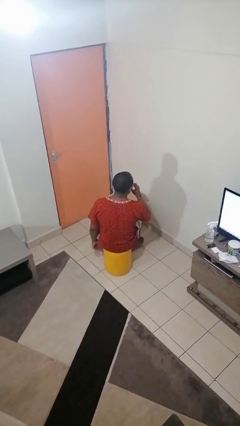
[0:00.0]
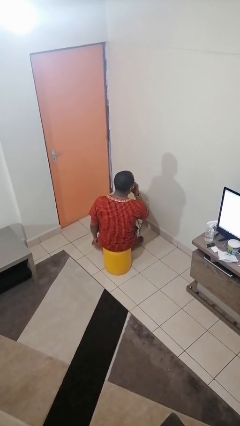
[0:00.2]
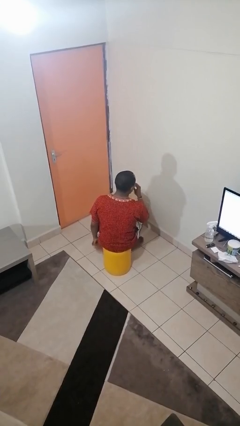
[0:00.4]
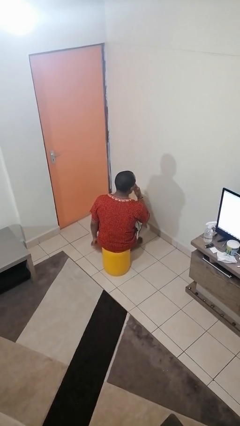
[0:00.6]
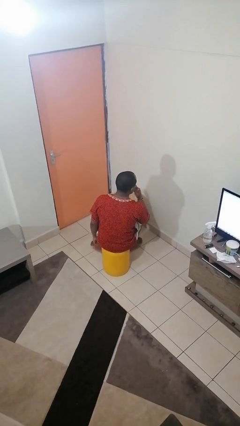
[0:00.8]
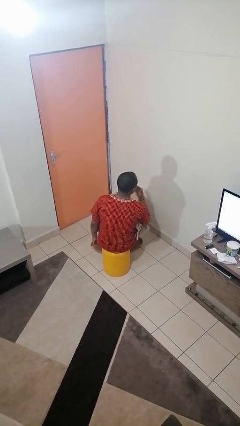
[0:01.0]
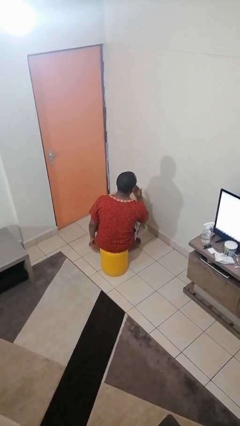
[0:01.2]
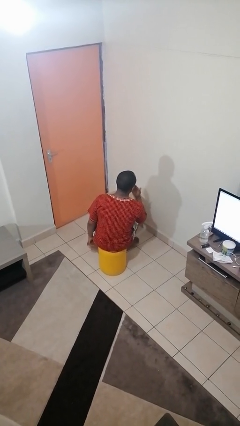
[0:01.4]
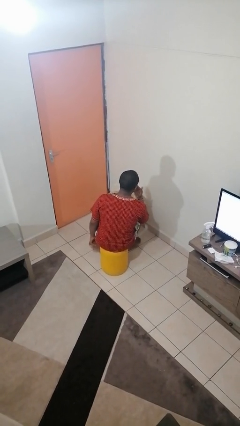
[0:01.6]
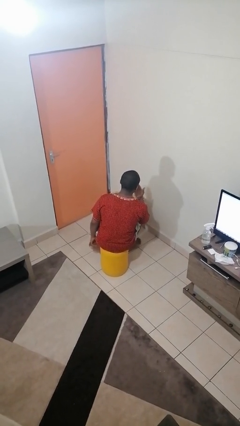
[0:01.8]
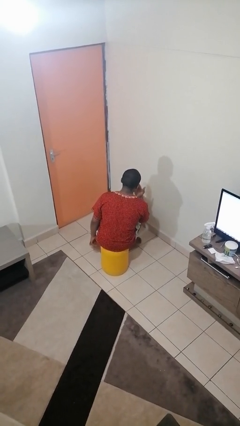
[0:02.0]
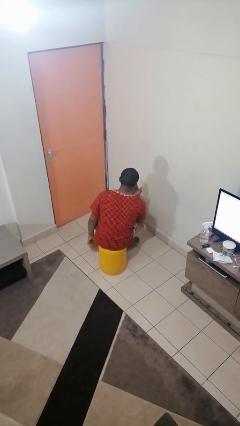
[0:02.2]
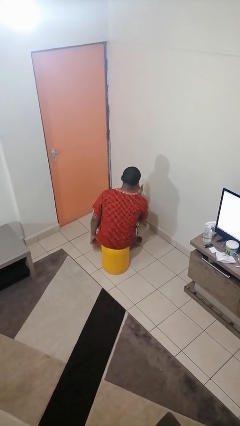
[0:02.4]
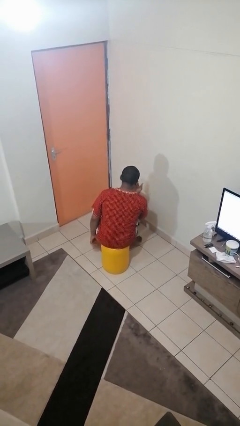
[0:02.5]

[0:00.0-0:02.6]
person licks fingers

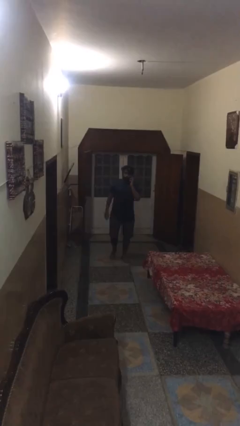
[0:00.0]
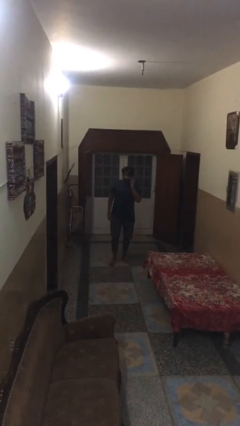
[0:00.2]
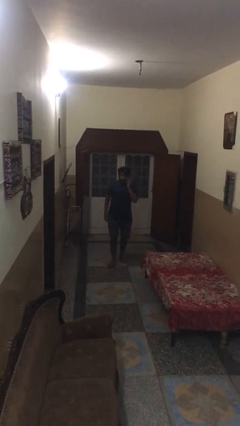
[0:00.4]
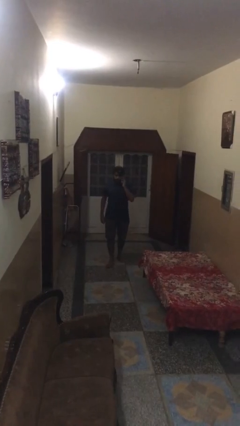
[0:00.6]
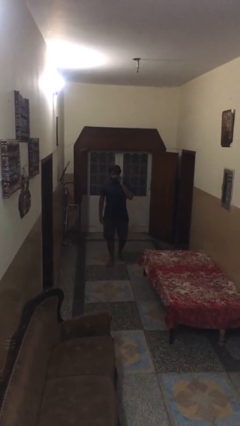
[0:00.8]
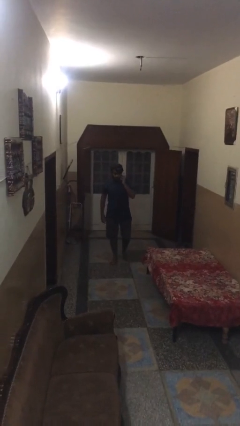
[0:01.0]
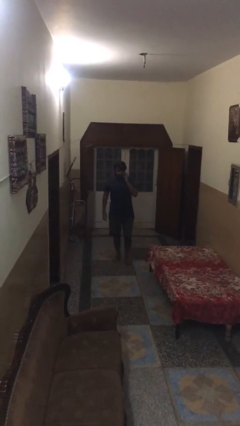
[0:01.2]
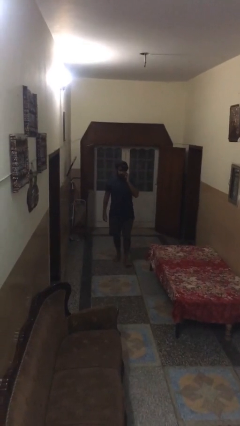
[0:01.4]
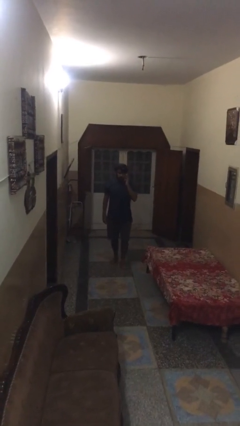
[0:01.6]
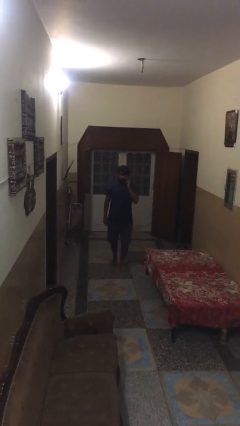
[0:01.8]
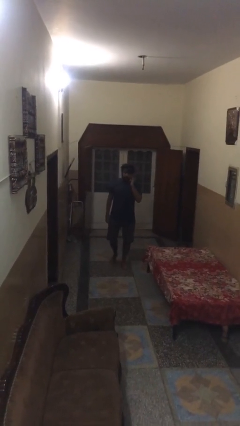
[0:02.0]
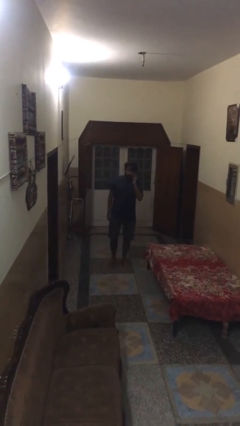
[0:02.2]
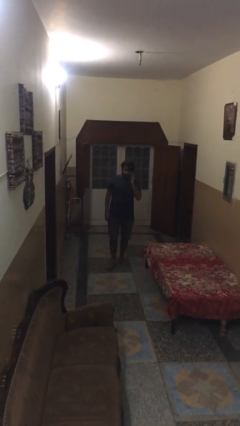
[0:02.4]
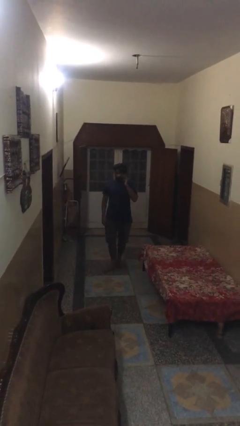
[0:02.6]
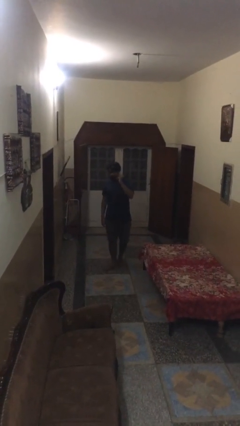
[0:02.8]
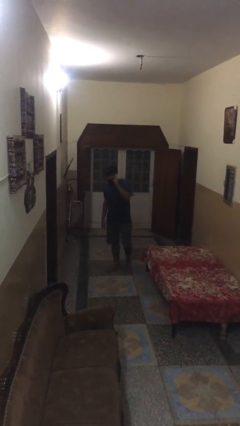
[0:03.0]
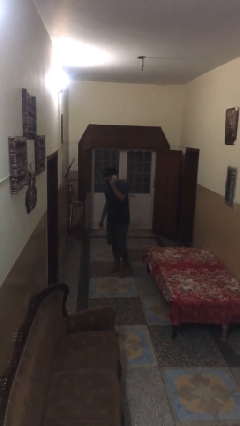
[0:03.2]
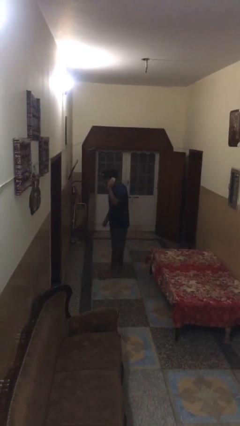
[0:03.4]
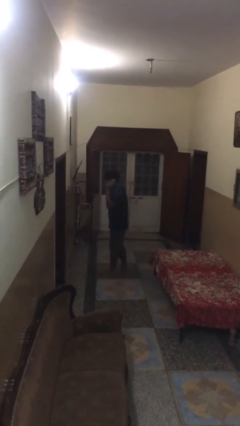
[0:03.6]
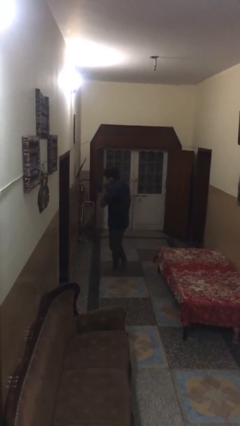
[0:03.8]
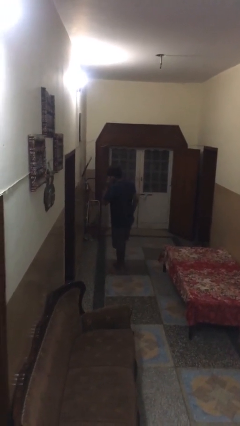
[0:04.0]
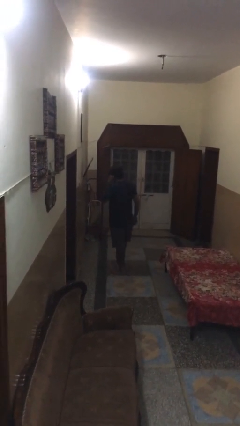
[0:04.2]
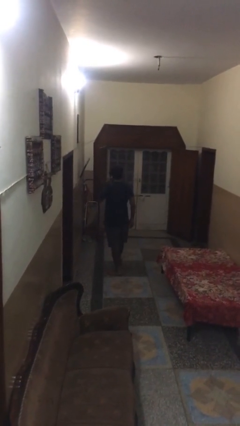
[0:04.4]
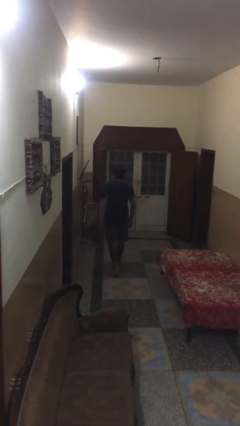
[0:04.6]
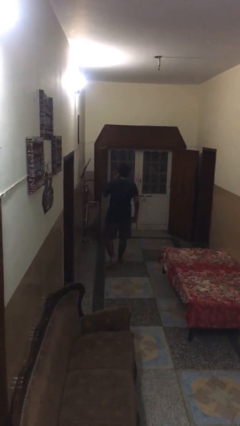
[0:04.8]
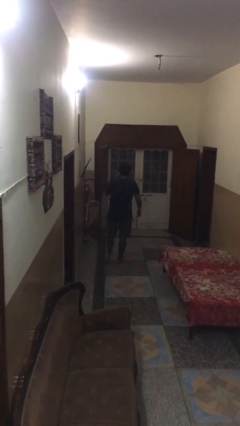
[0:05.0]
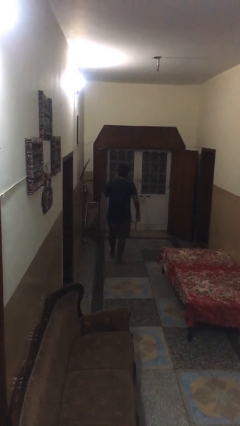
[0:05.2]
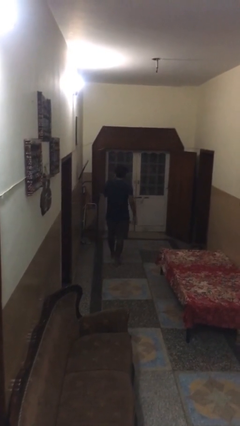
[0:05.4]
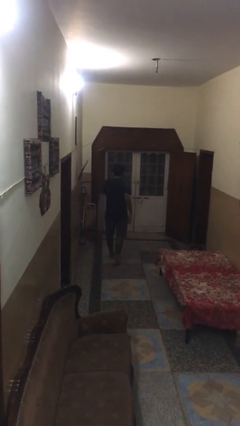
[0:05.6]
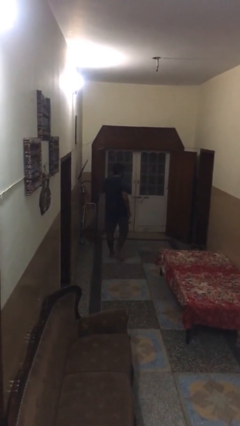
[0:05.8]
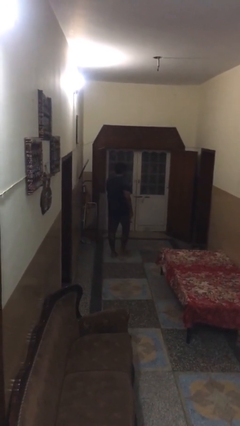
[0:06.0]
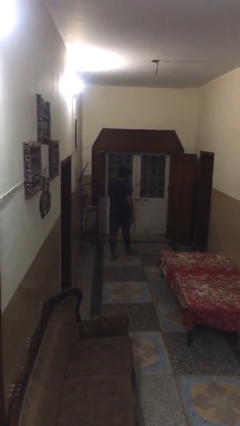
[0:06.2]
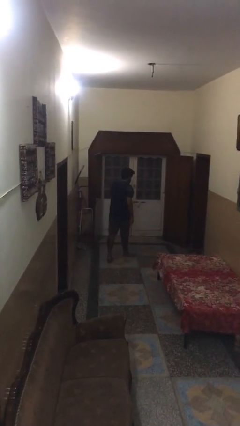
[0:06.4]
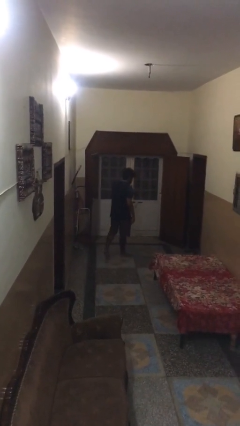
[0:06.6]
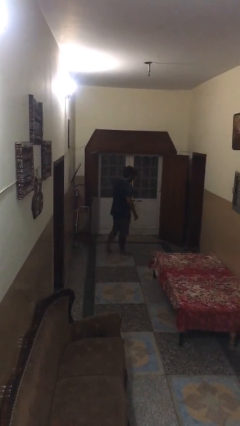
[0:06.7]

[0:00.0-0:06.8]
person talks on phone

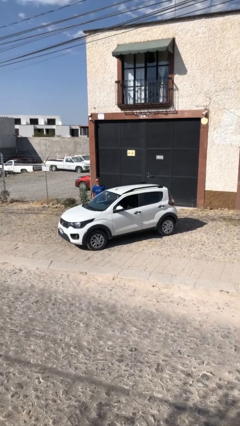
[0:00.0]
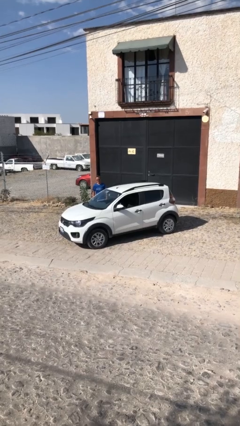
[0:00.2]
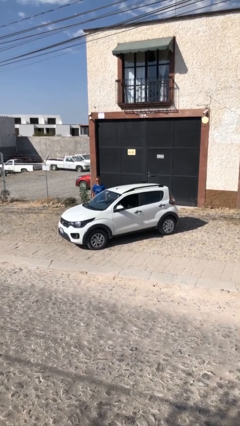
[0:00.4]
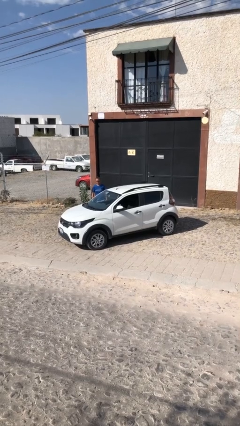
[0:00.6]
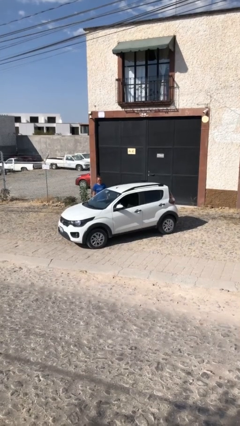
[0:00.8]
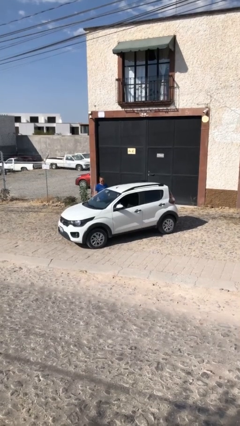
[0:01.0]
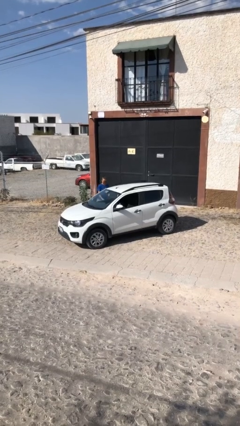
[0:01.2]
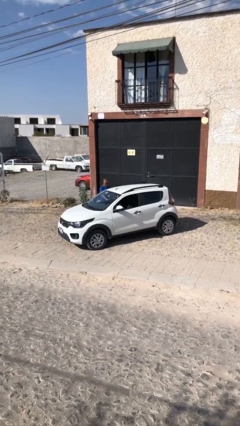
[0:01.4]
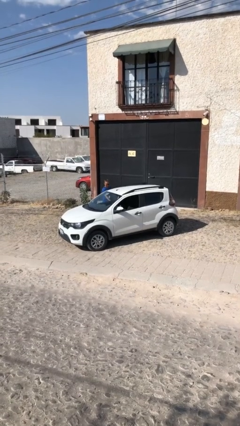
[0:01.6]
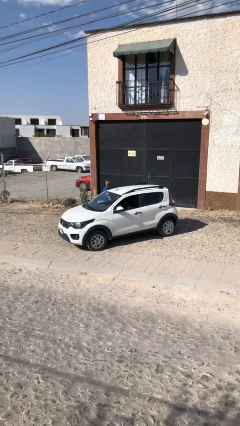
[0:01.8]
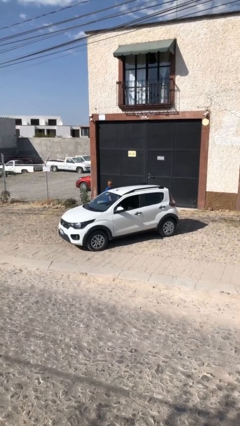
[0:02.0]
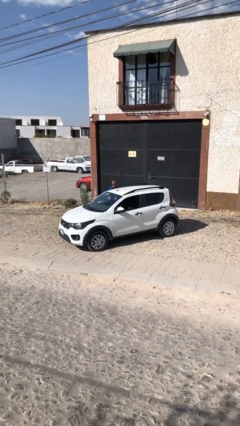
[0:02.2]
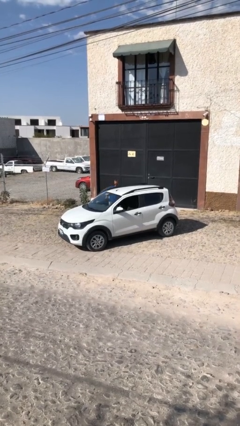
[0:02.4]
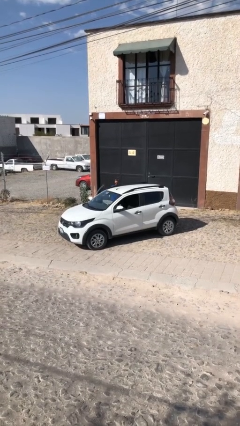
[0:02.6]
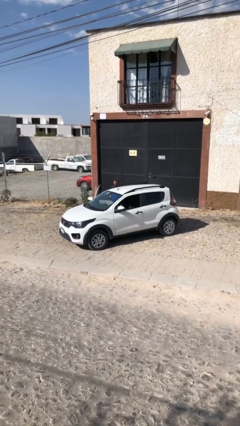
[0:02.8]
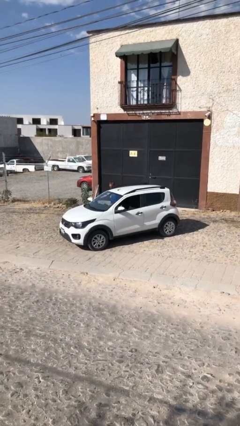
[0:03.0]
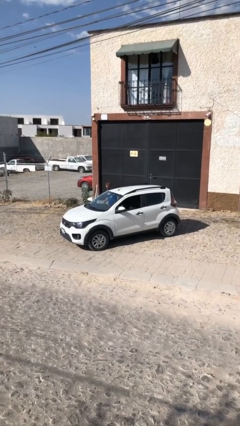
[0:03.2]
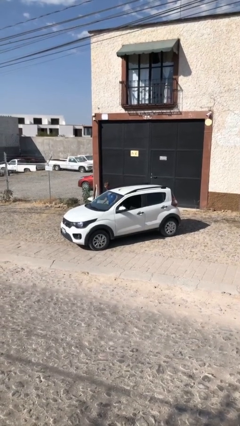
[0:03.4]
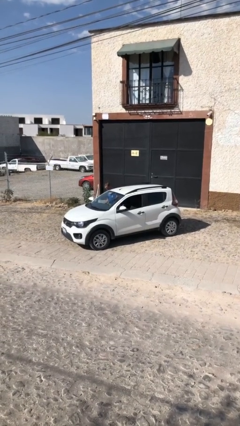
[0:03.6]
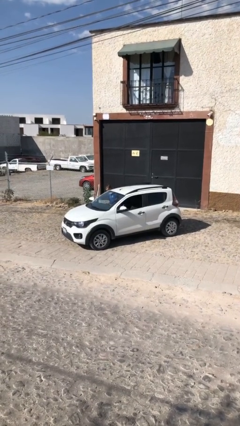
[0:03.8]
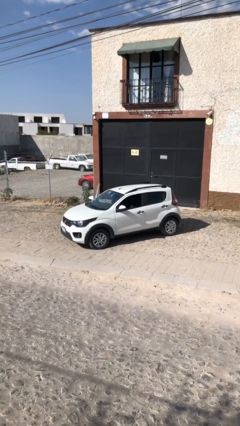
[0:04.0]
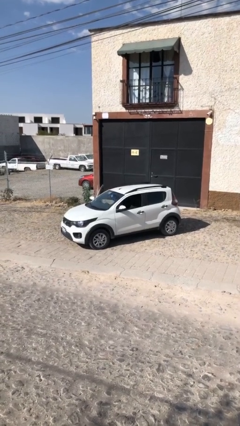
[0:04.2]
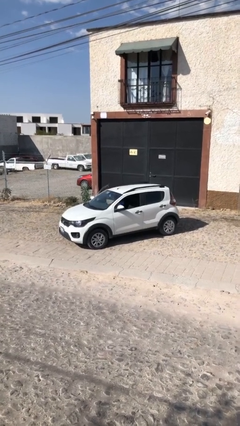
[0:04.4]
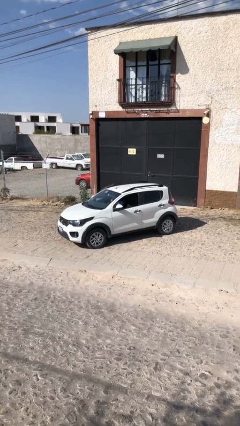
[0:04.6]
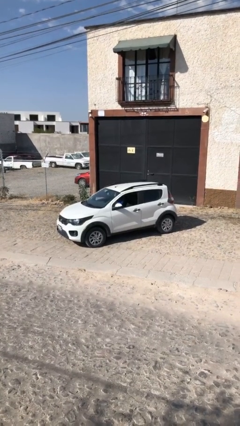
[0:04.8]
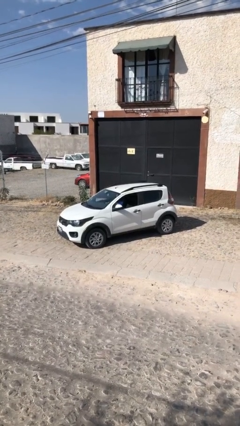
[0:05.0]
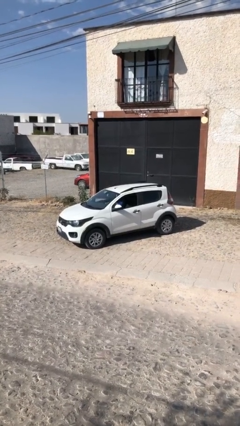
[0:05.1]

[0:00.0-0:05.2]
car picks up person

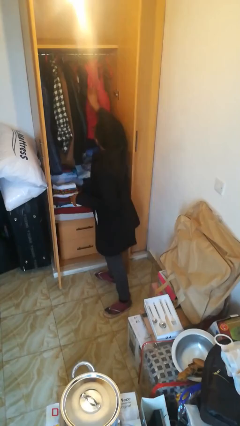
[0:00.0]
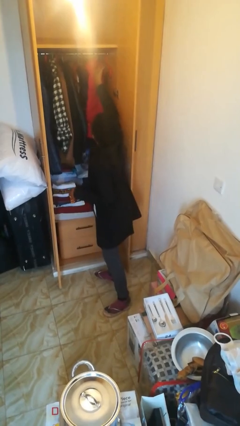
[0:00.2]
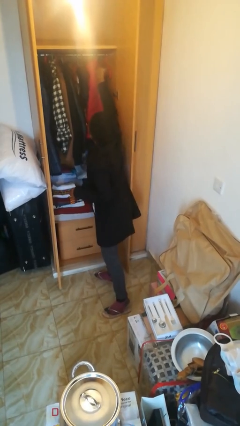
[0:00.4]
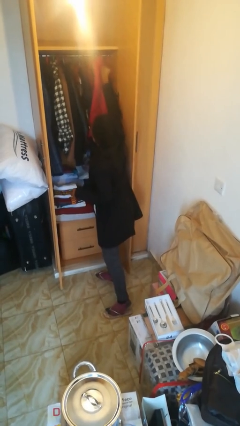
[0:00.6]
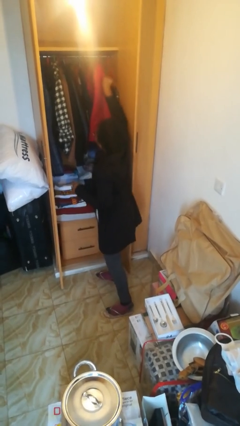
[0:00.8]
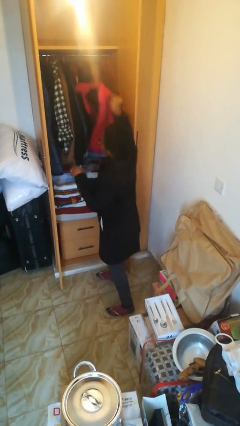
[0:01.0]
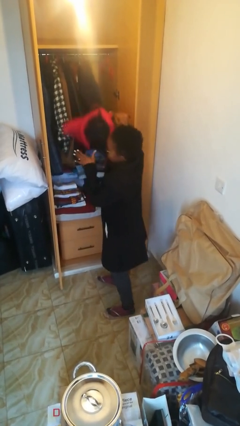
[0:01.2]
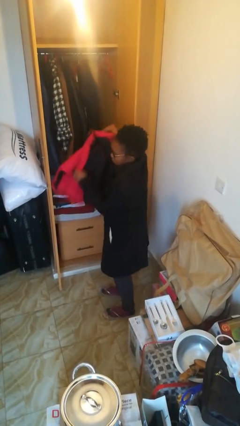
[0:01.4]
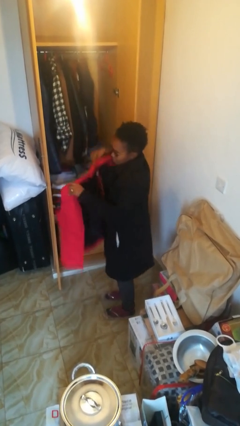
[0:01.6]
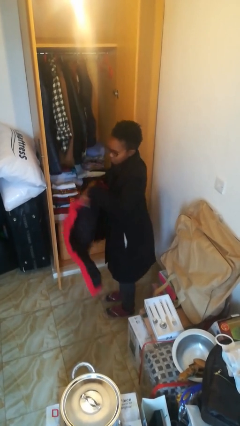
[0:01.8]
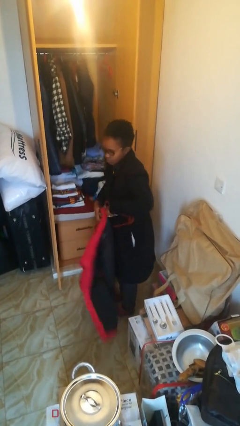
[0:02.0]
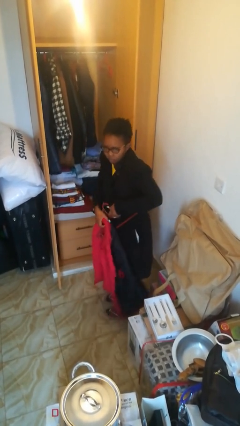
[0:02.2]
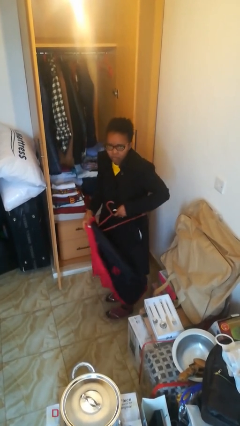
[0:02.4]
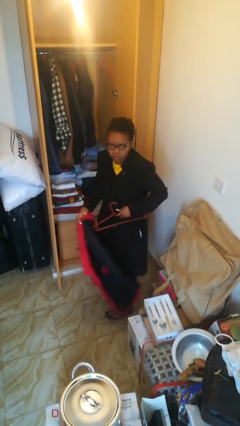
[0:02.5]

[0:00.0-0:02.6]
person takes clothes from closet

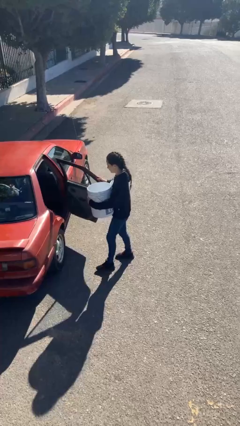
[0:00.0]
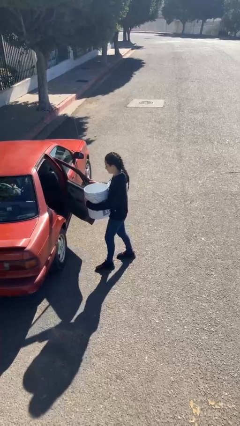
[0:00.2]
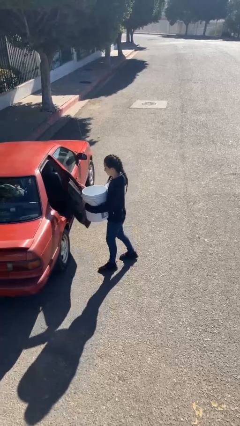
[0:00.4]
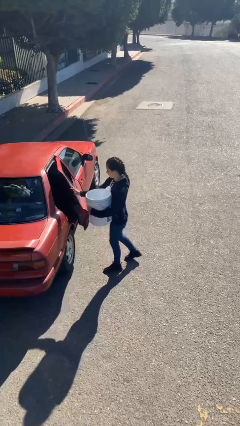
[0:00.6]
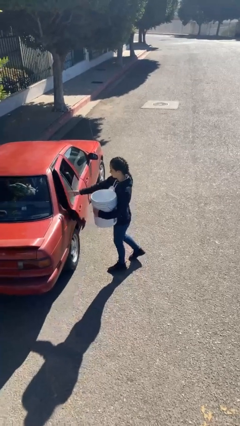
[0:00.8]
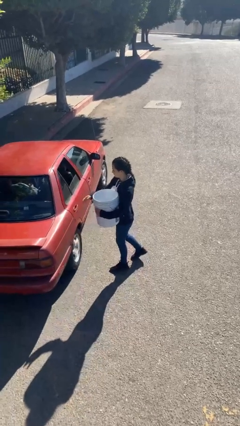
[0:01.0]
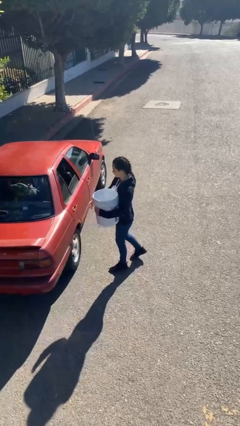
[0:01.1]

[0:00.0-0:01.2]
person closes car door
